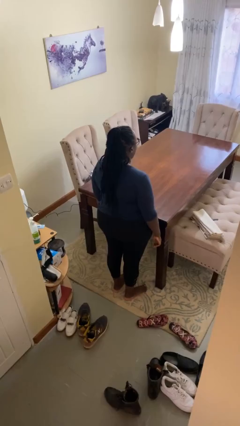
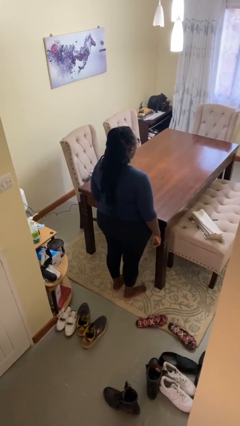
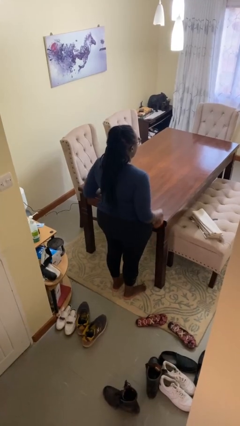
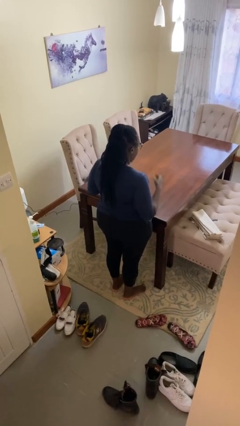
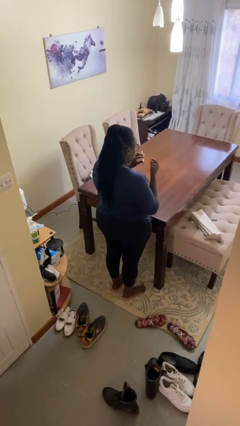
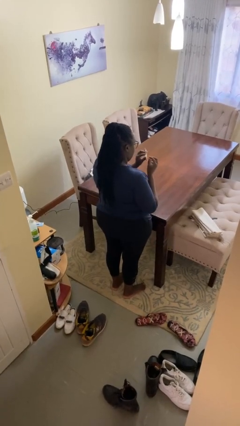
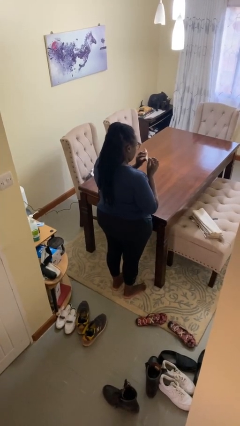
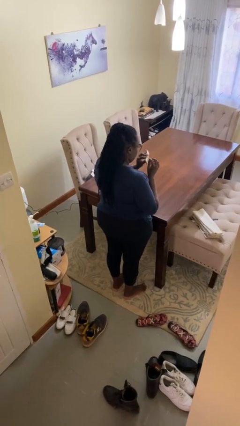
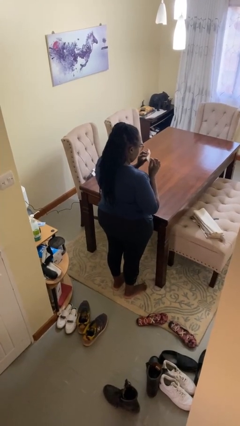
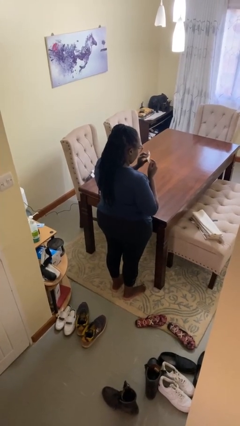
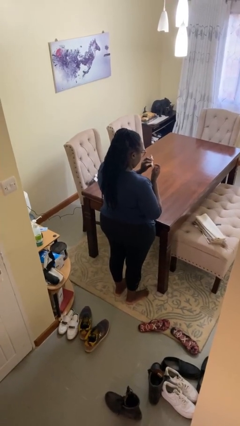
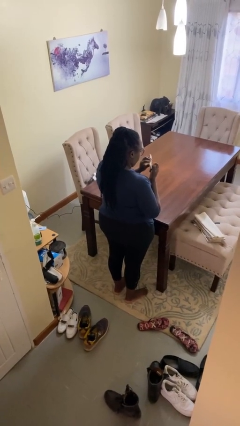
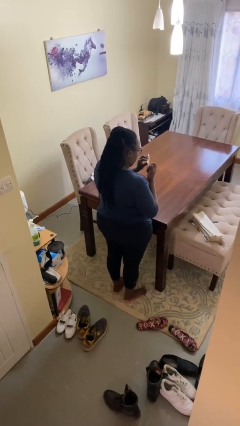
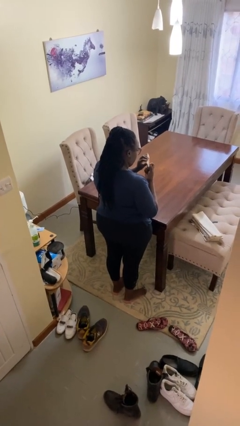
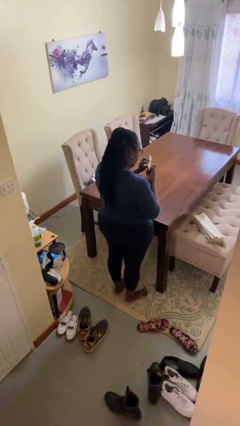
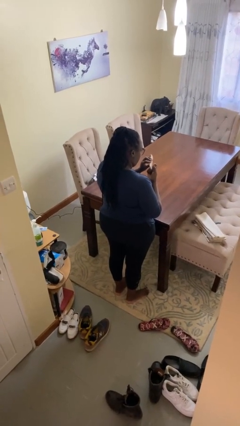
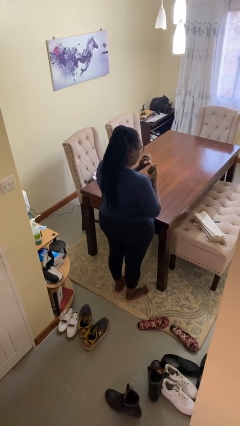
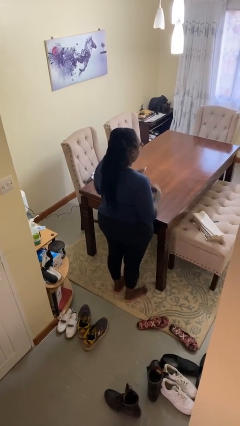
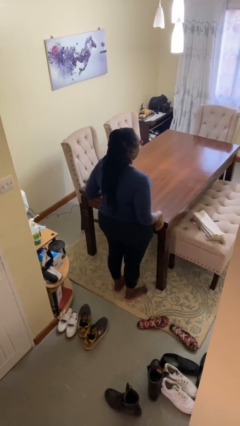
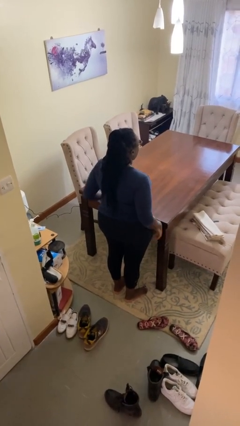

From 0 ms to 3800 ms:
person files fingernails

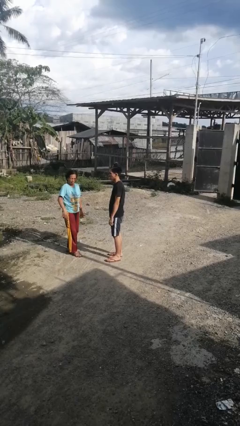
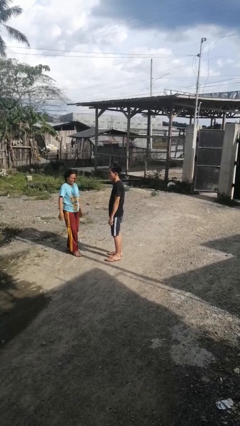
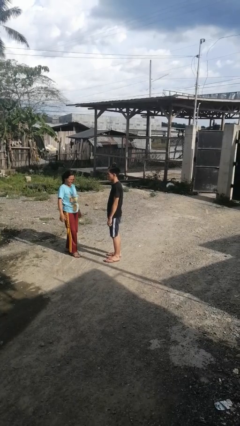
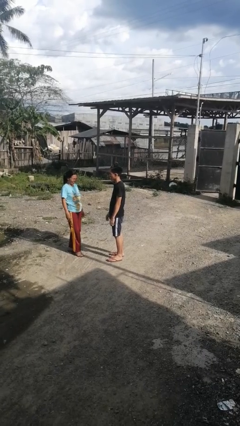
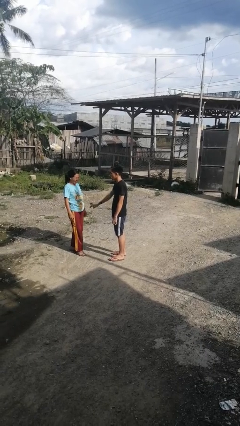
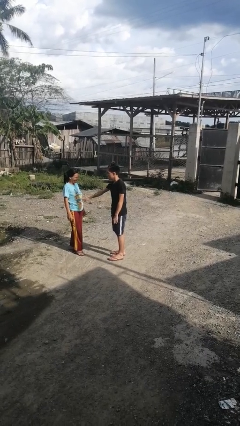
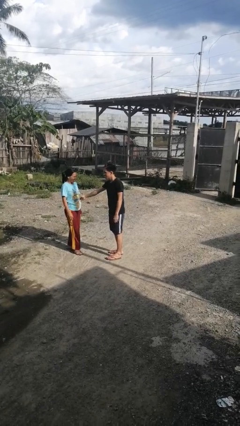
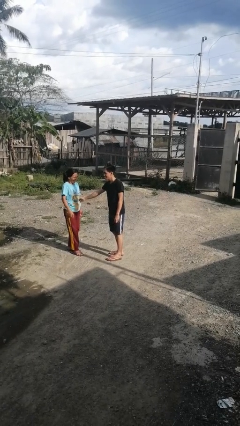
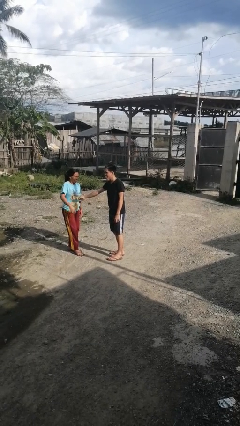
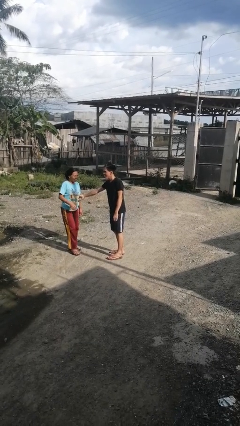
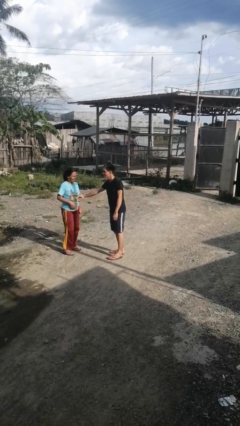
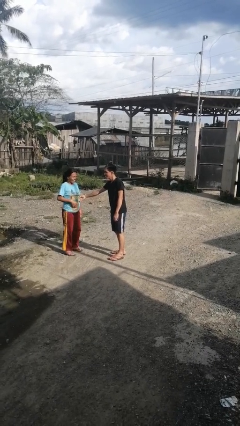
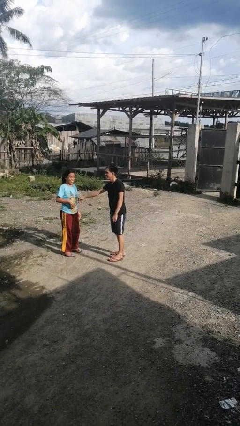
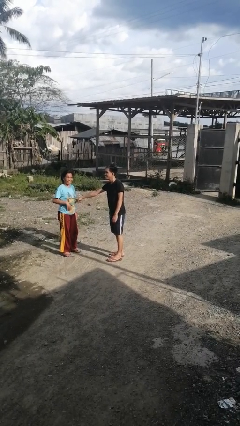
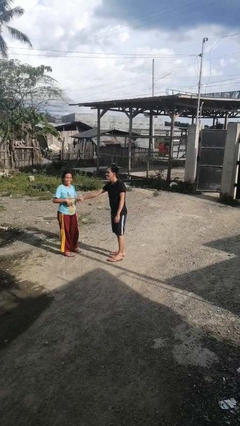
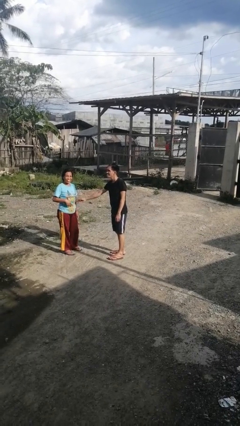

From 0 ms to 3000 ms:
person tickles person

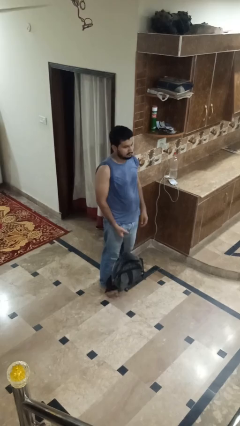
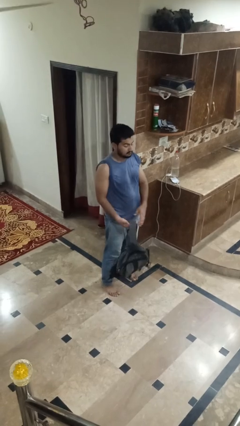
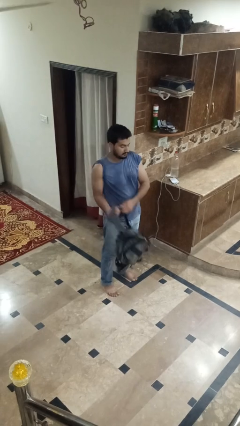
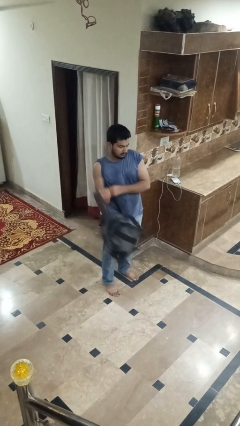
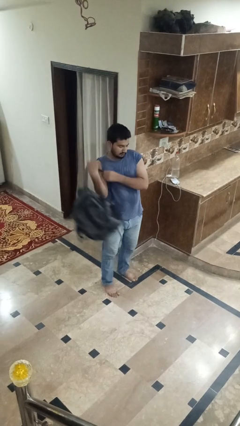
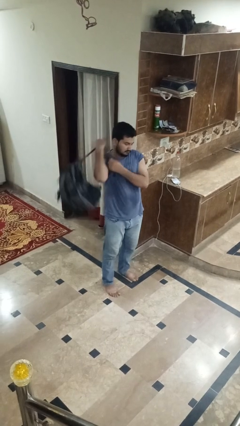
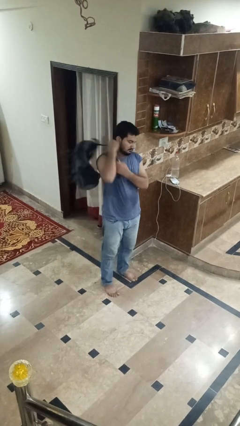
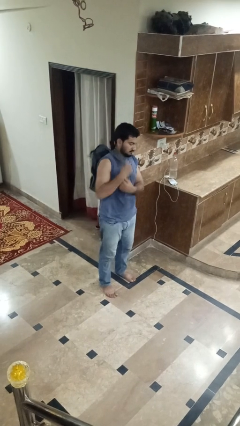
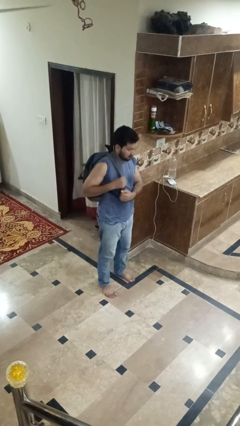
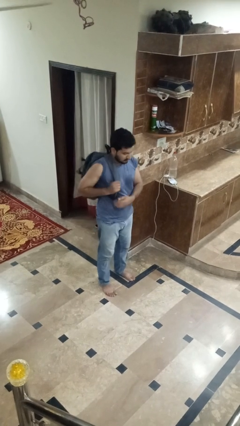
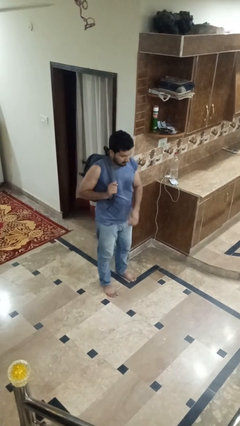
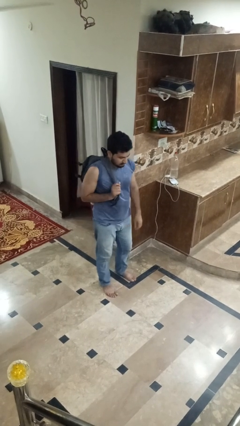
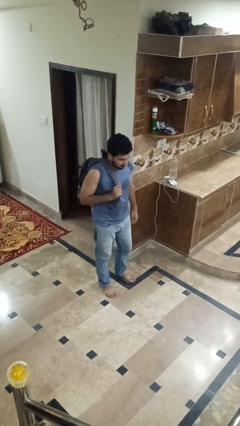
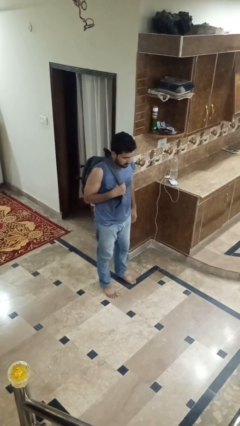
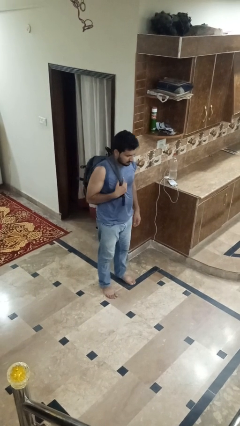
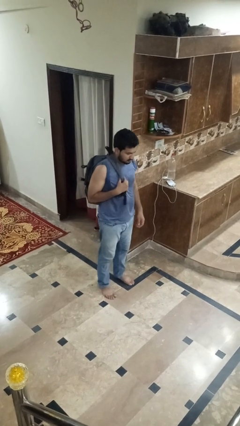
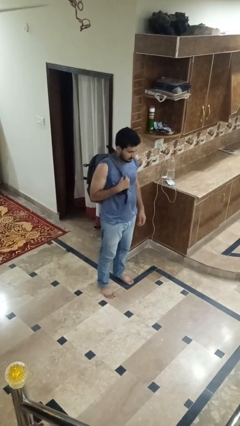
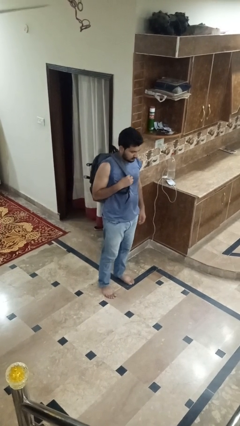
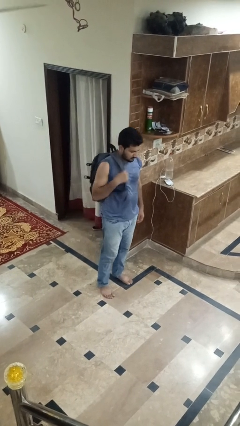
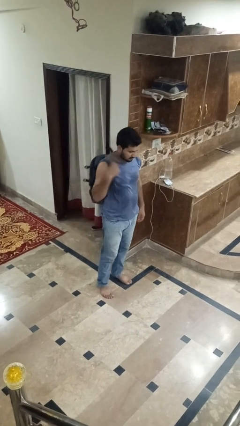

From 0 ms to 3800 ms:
person puts on backpack

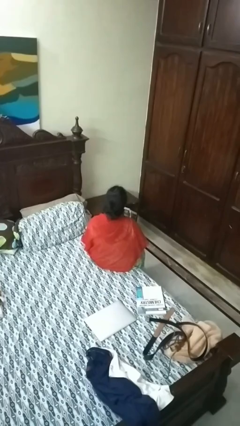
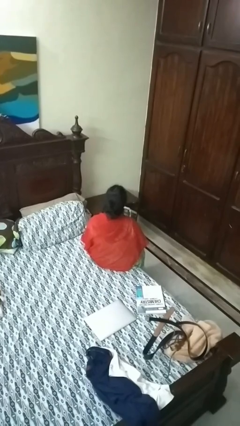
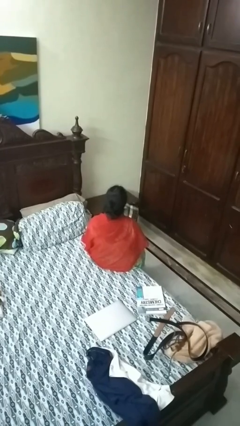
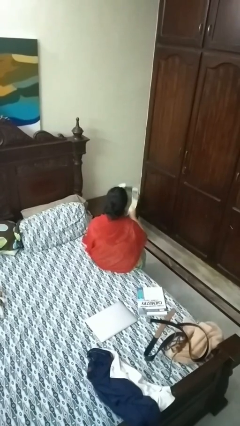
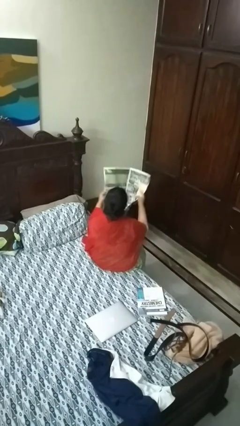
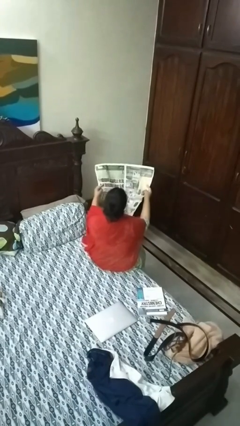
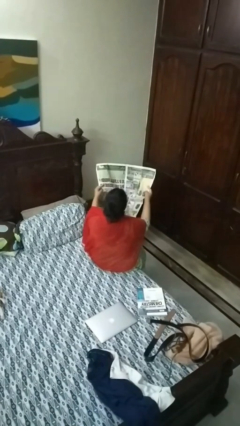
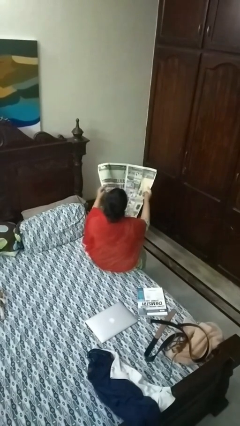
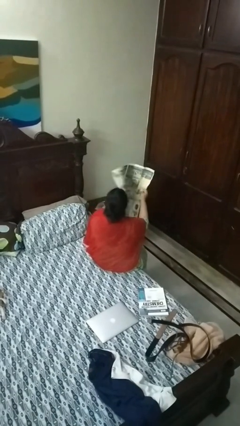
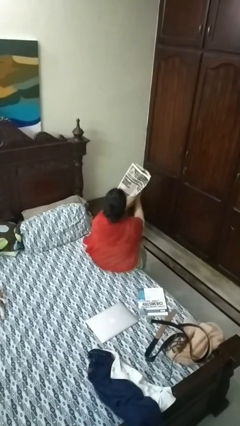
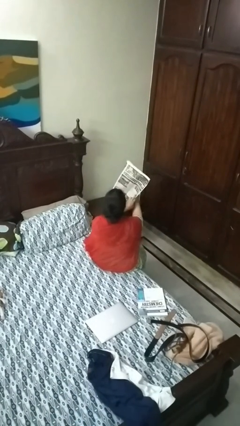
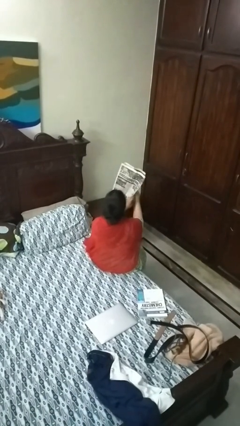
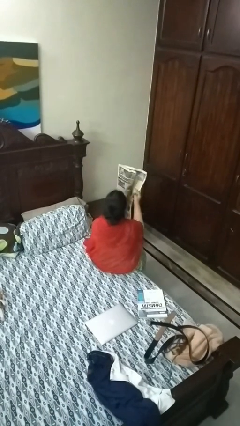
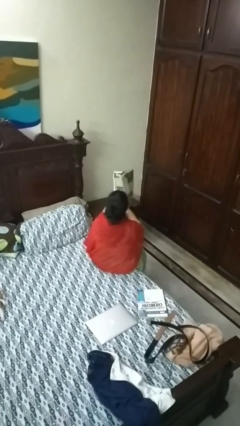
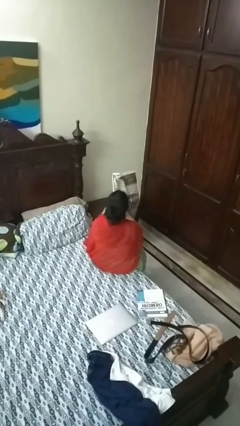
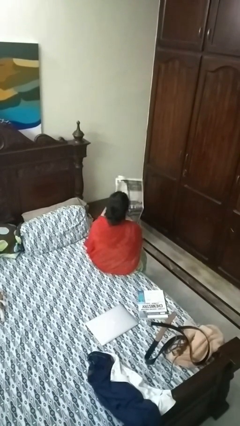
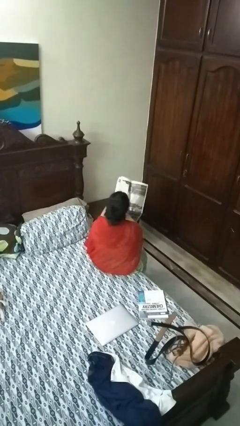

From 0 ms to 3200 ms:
person reads newspaper

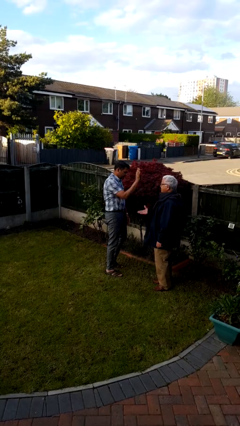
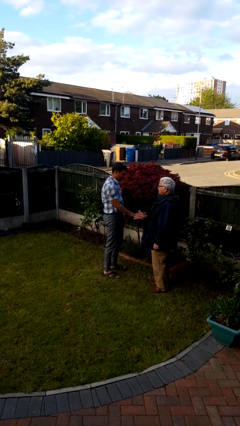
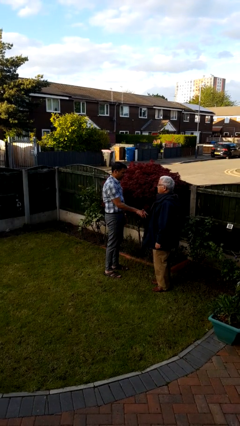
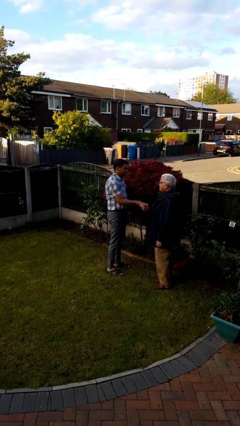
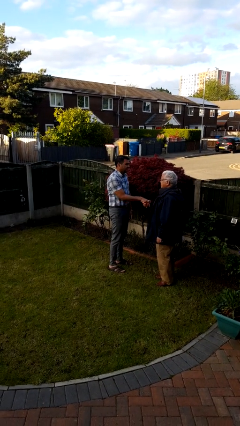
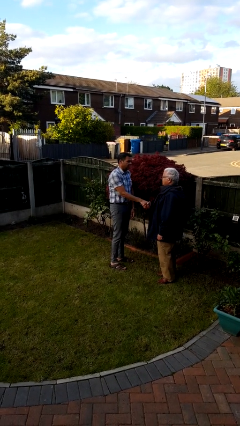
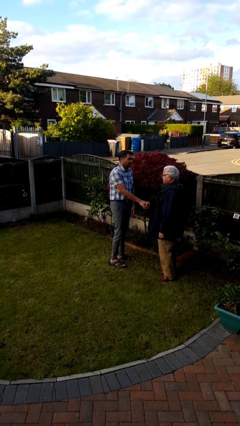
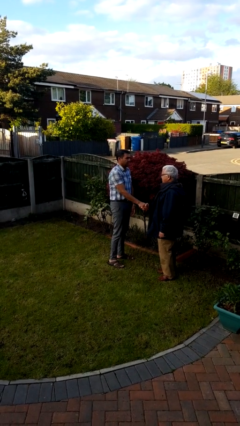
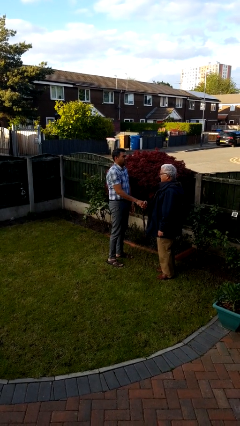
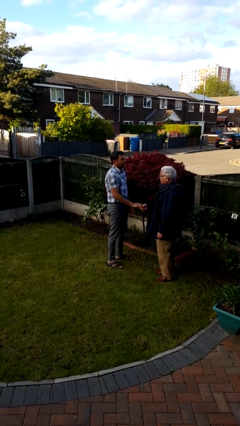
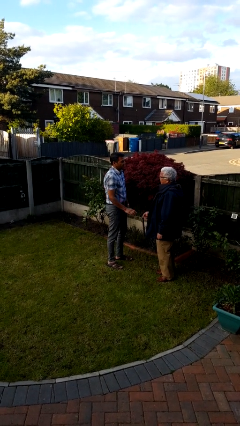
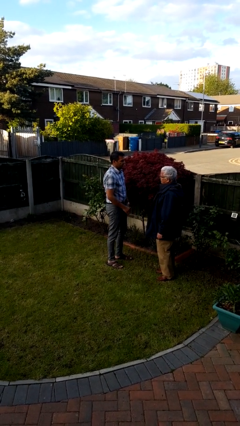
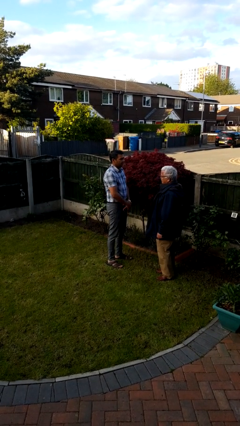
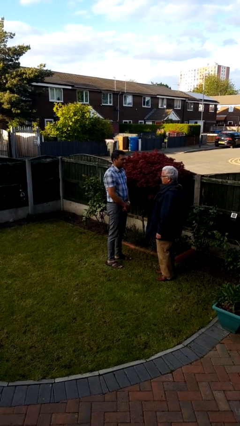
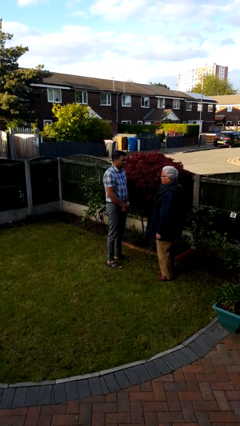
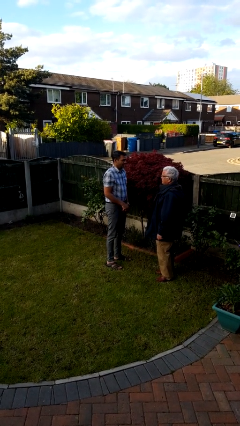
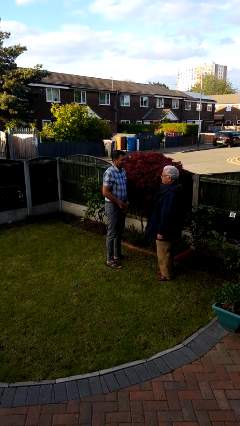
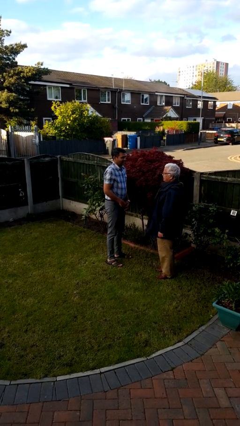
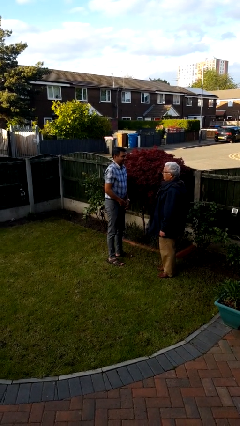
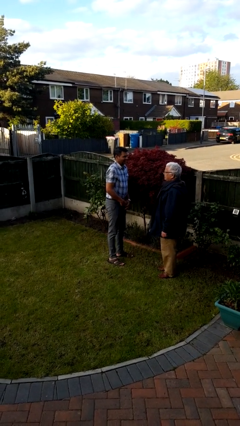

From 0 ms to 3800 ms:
person highfives hand
